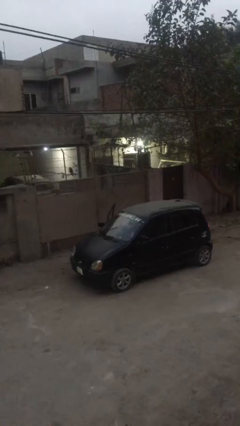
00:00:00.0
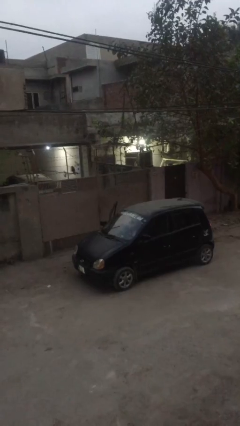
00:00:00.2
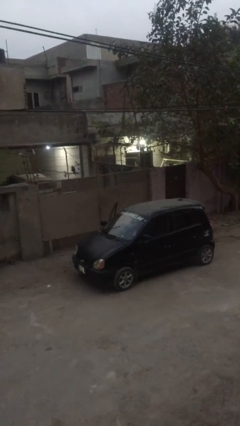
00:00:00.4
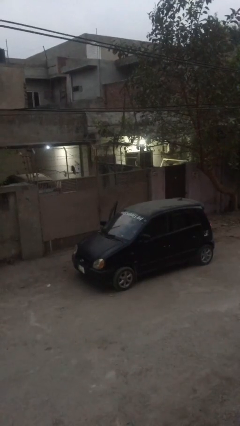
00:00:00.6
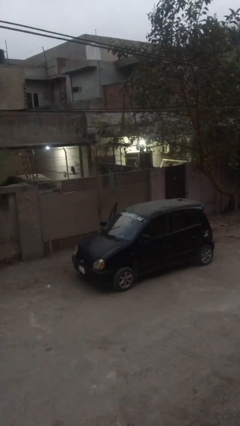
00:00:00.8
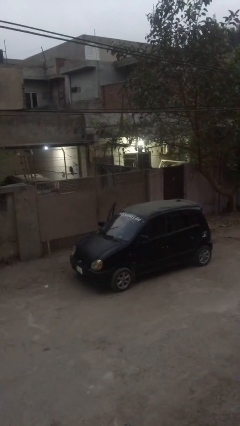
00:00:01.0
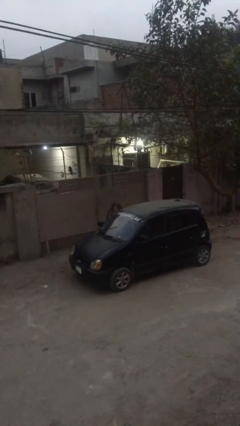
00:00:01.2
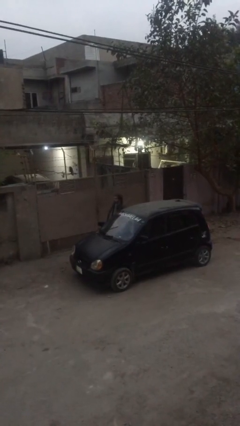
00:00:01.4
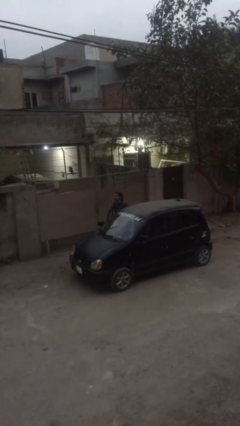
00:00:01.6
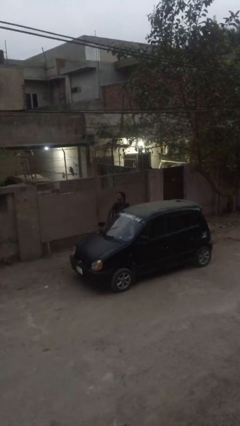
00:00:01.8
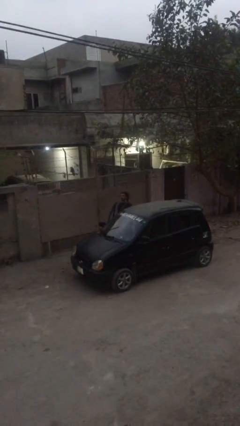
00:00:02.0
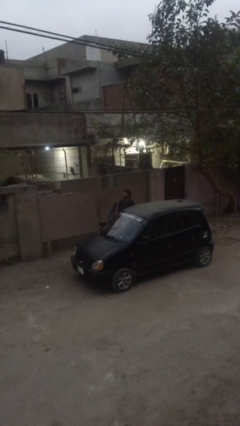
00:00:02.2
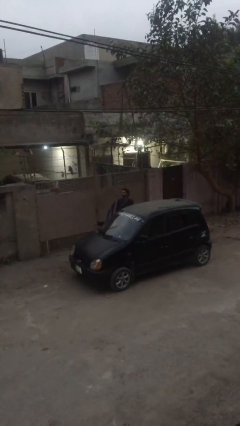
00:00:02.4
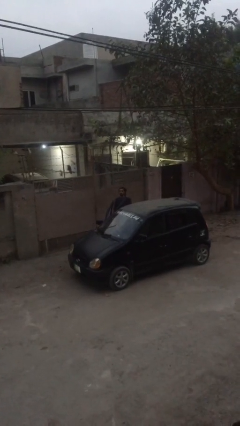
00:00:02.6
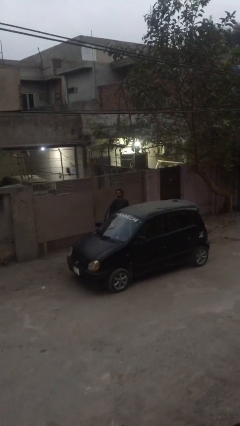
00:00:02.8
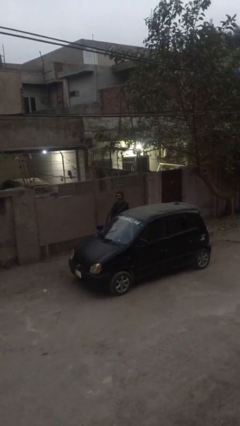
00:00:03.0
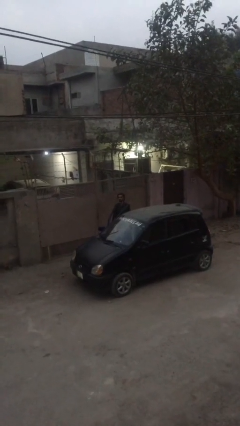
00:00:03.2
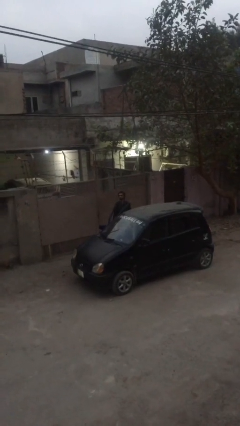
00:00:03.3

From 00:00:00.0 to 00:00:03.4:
person exits car

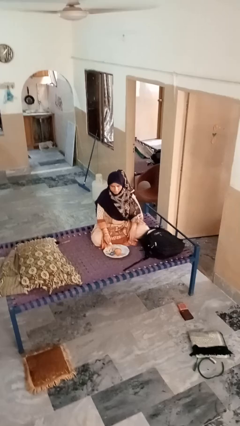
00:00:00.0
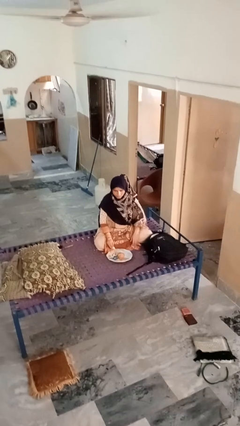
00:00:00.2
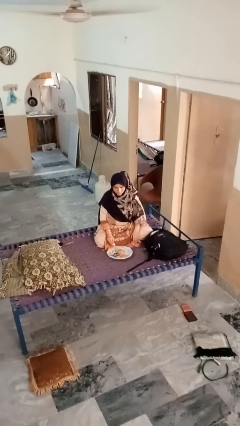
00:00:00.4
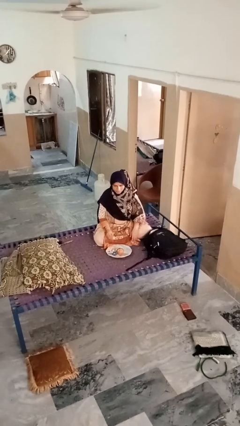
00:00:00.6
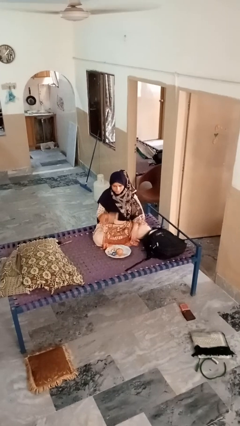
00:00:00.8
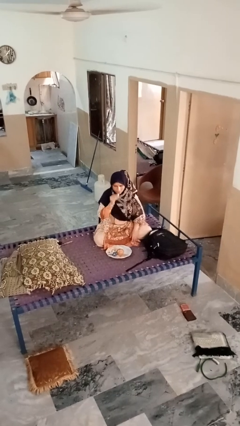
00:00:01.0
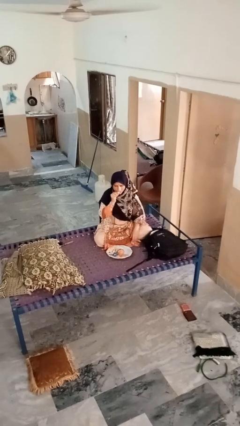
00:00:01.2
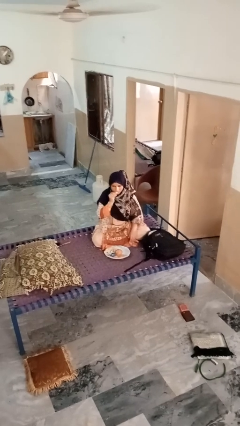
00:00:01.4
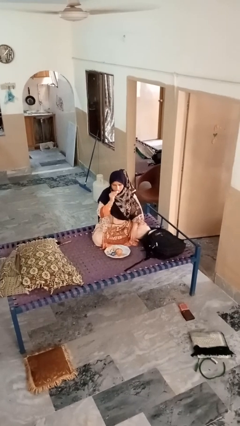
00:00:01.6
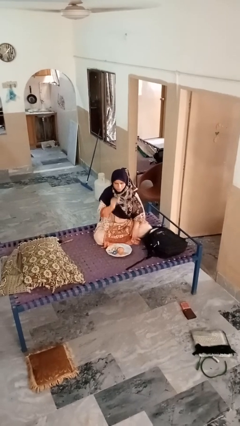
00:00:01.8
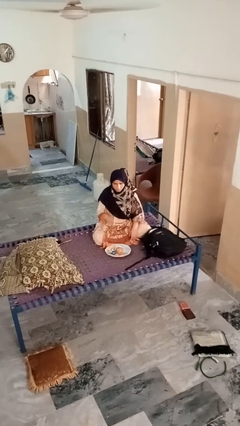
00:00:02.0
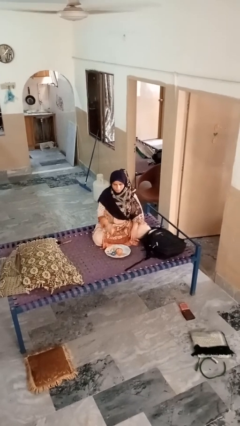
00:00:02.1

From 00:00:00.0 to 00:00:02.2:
person eats apple

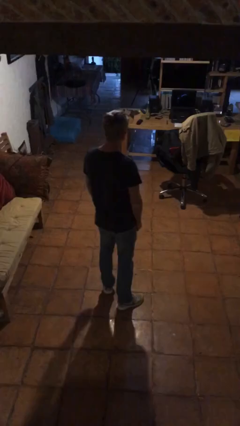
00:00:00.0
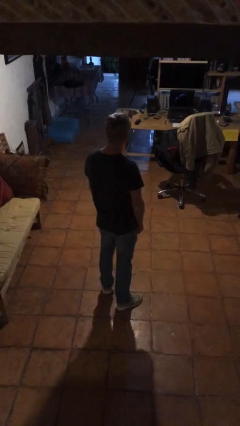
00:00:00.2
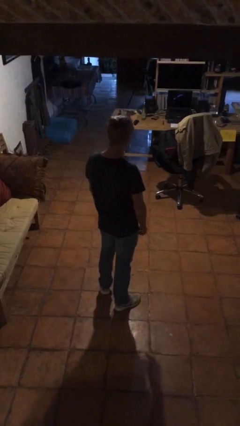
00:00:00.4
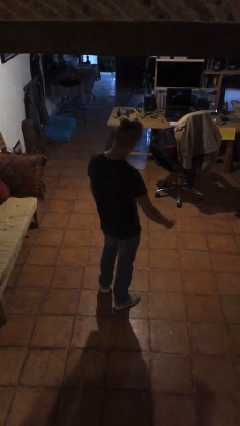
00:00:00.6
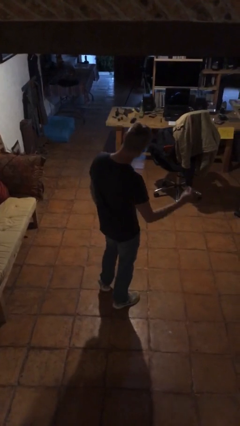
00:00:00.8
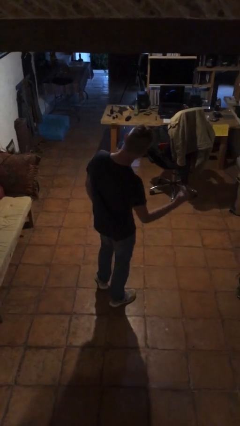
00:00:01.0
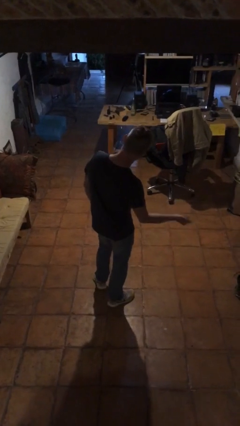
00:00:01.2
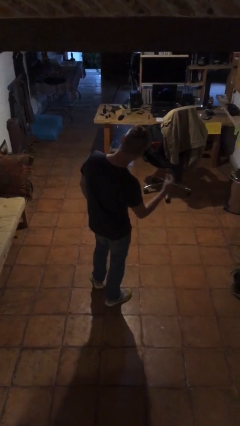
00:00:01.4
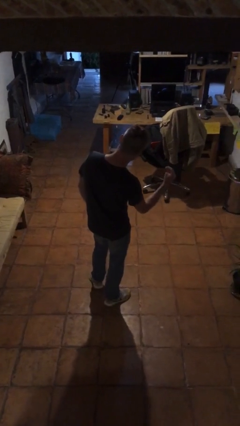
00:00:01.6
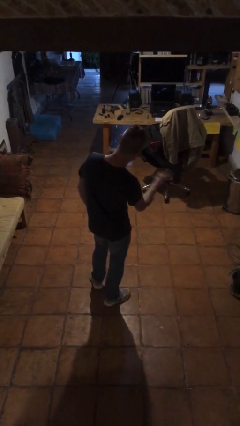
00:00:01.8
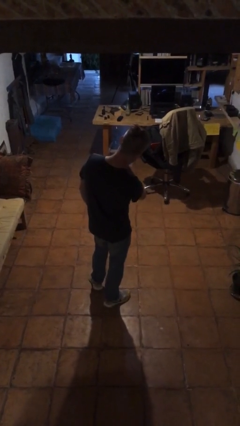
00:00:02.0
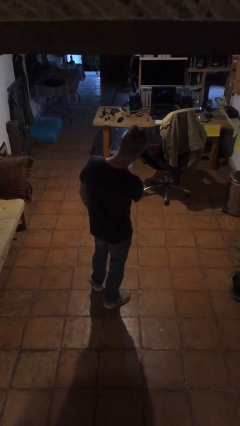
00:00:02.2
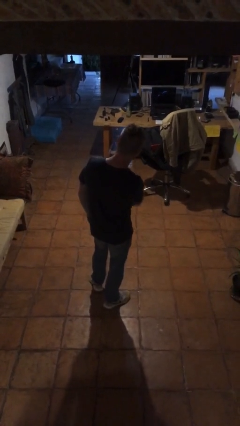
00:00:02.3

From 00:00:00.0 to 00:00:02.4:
person snaps fingers

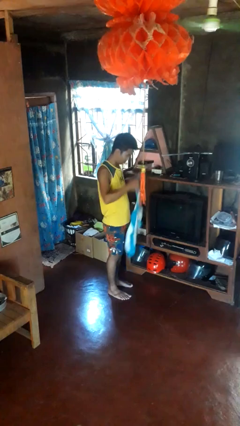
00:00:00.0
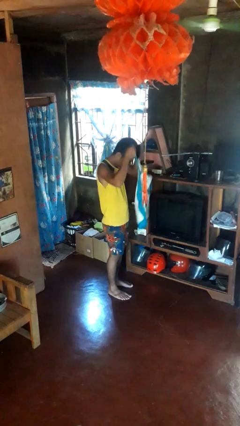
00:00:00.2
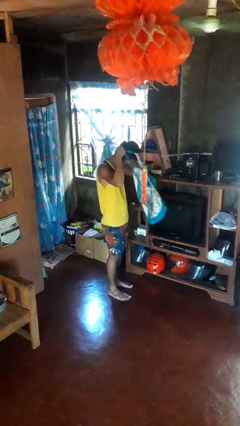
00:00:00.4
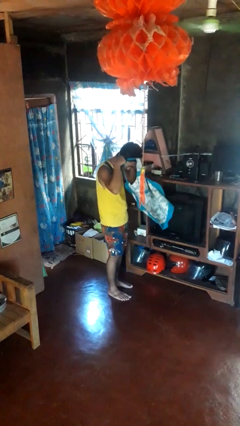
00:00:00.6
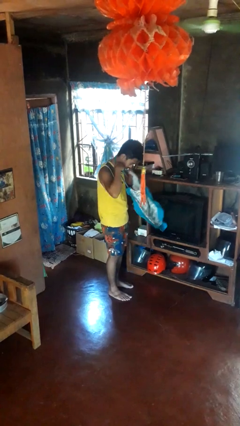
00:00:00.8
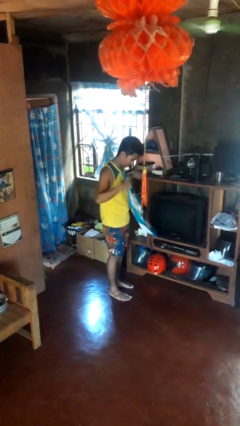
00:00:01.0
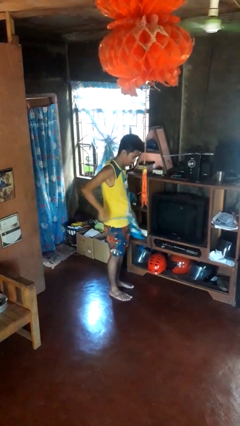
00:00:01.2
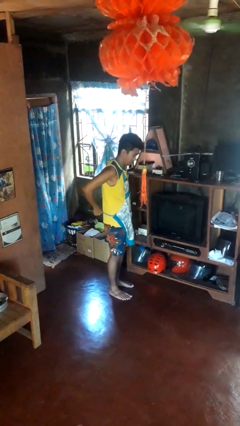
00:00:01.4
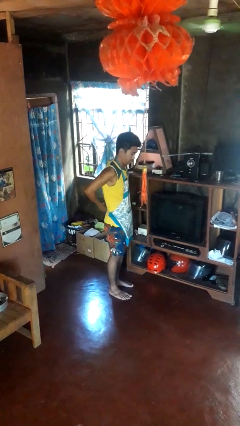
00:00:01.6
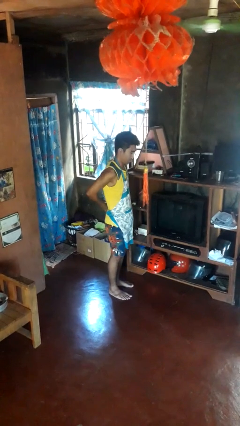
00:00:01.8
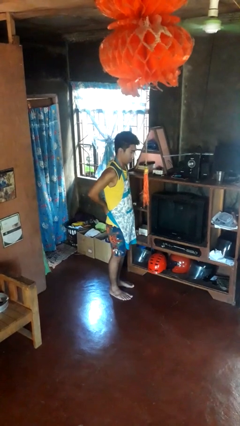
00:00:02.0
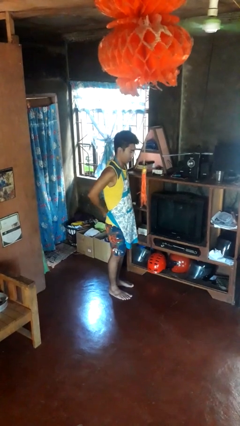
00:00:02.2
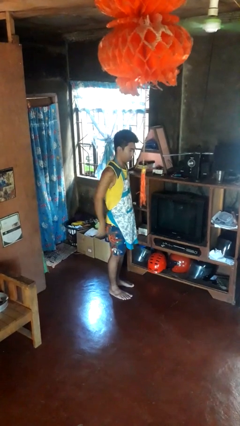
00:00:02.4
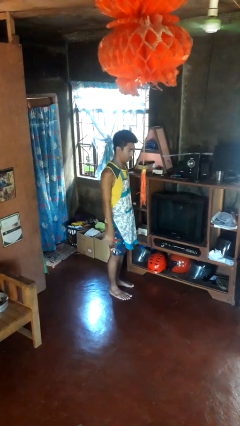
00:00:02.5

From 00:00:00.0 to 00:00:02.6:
person puts on apron

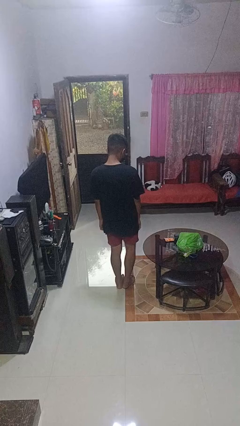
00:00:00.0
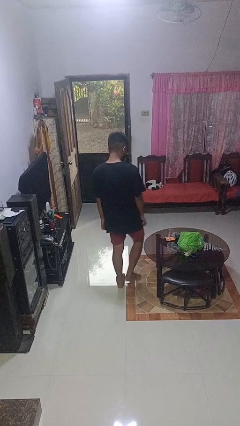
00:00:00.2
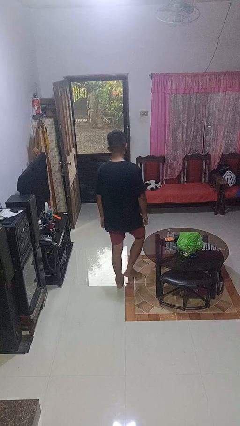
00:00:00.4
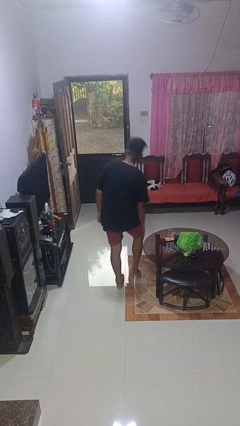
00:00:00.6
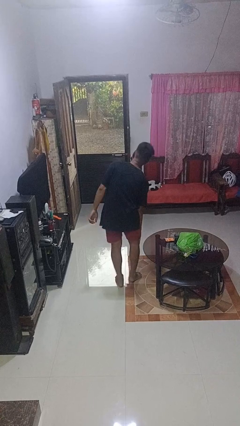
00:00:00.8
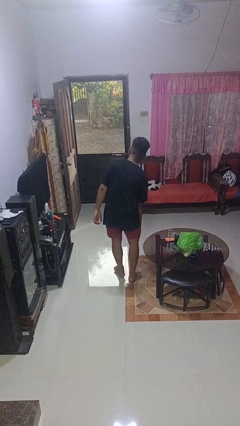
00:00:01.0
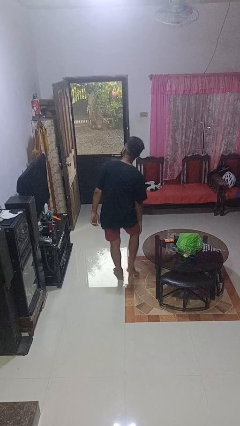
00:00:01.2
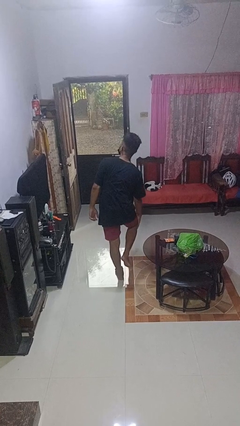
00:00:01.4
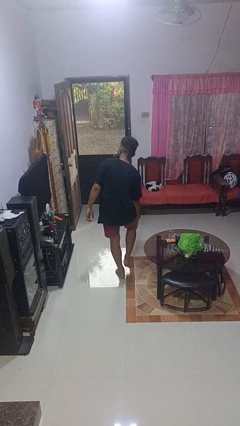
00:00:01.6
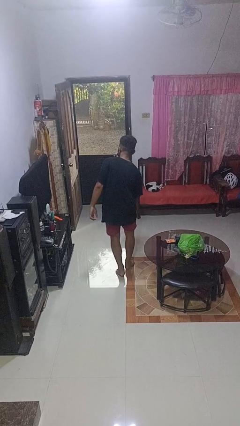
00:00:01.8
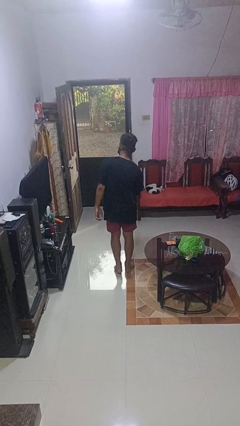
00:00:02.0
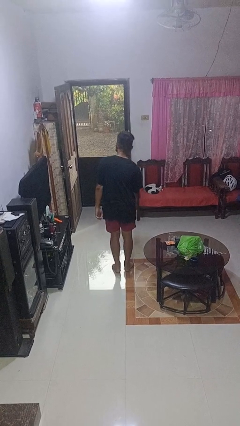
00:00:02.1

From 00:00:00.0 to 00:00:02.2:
person bumps into table

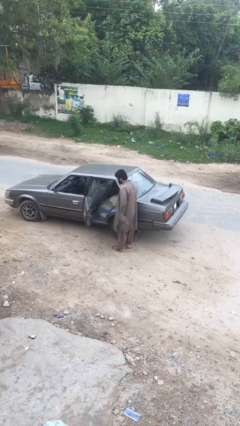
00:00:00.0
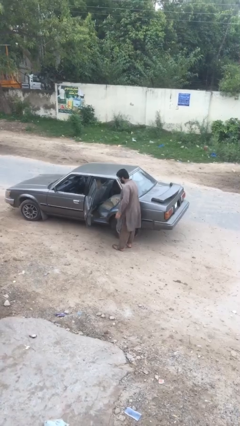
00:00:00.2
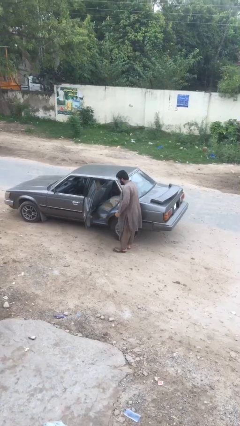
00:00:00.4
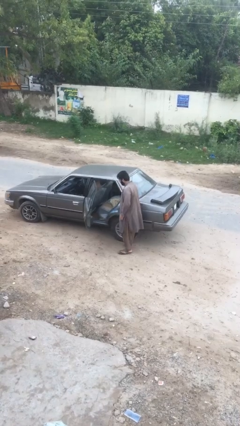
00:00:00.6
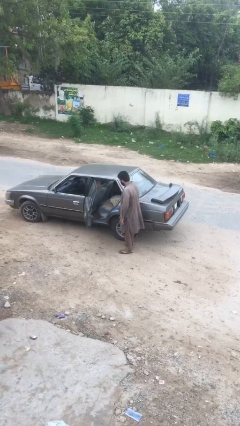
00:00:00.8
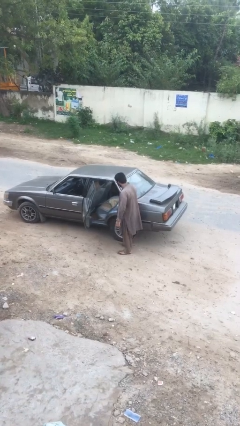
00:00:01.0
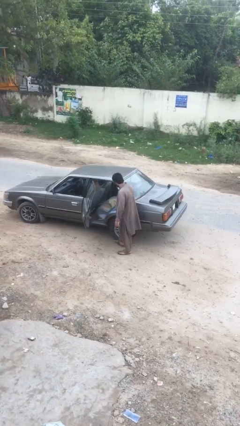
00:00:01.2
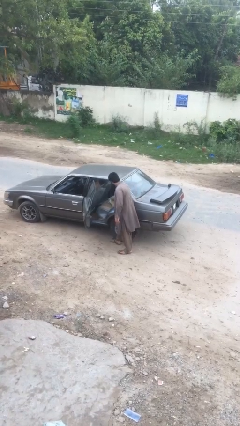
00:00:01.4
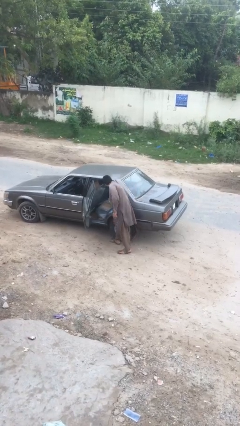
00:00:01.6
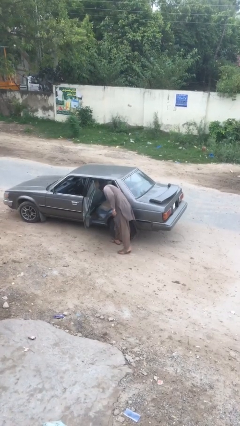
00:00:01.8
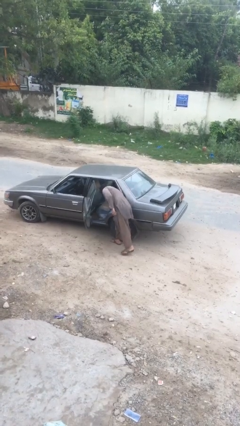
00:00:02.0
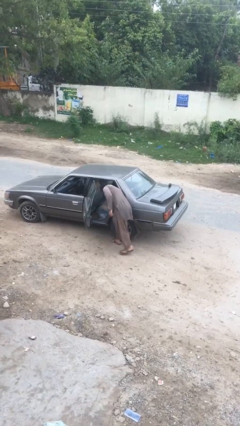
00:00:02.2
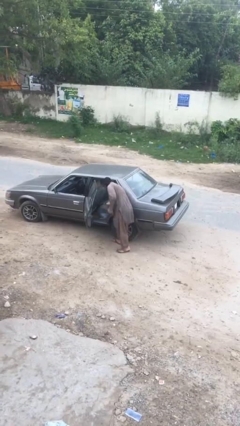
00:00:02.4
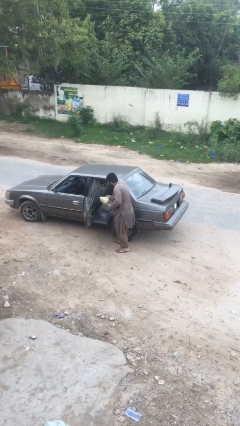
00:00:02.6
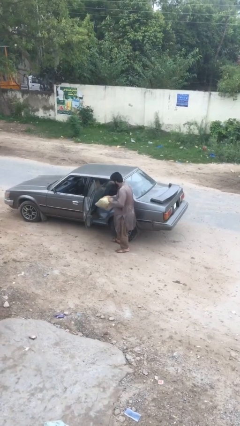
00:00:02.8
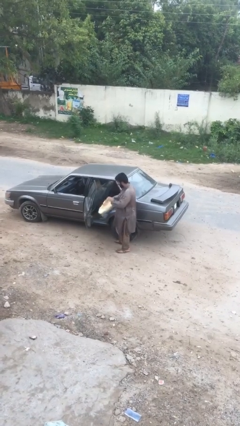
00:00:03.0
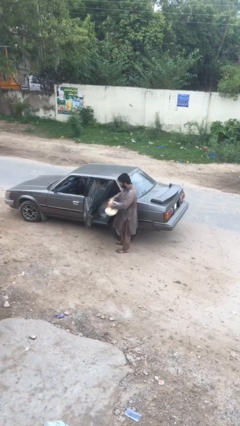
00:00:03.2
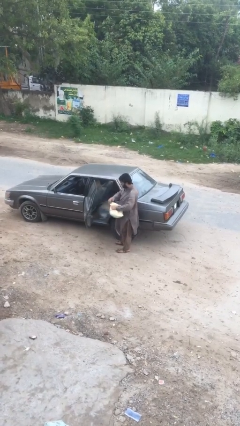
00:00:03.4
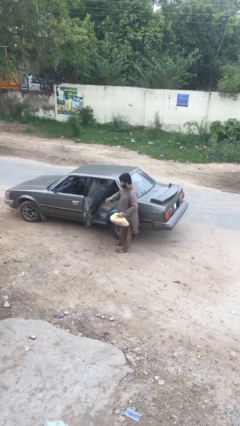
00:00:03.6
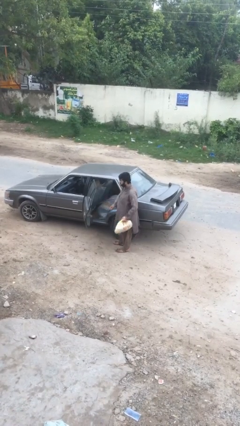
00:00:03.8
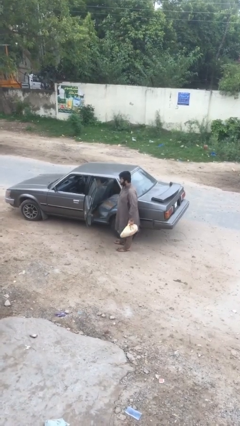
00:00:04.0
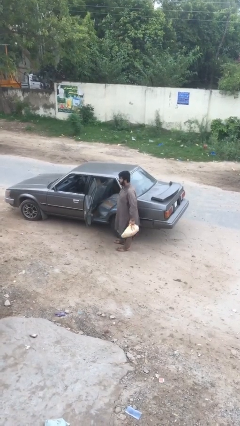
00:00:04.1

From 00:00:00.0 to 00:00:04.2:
person unloads car

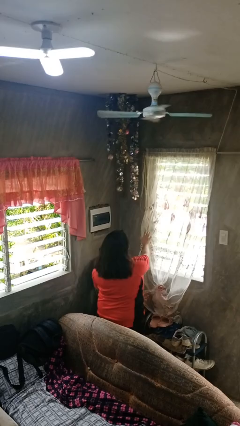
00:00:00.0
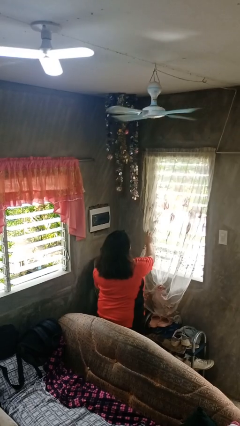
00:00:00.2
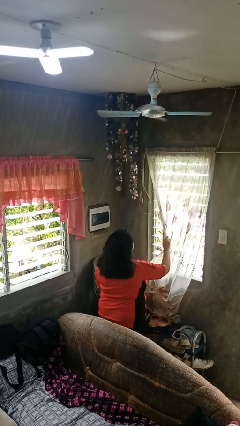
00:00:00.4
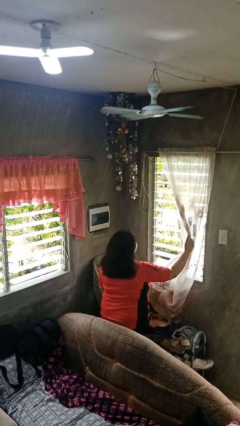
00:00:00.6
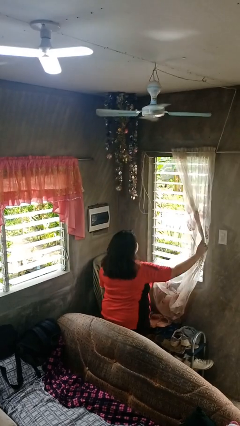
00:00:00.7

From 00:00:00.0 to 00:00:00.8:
person opens curtains
